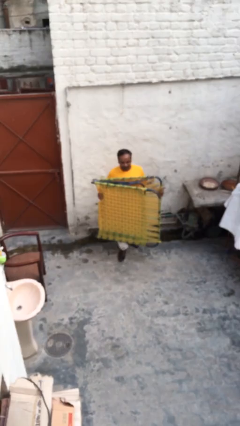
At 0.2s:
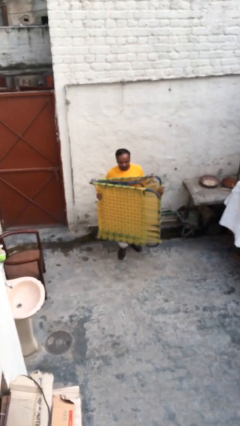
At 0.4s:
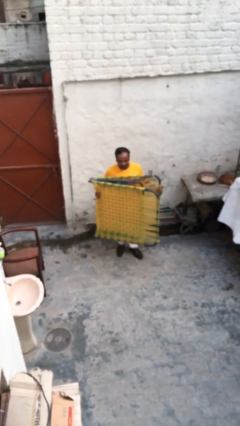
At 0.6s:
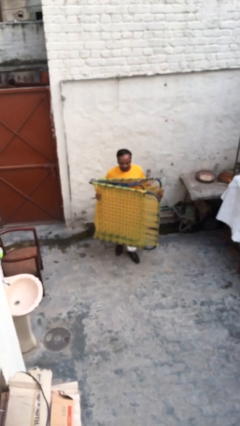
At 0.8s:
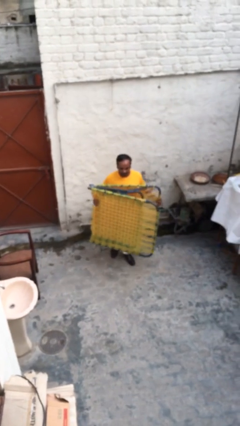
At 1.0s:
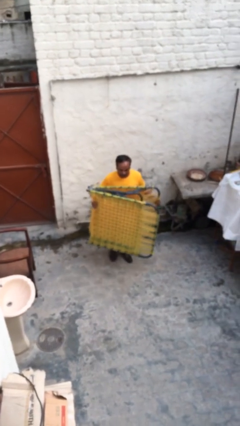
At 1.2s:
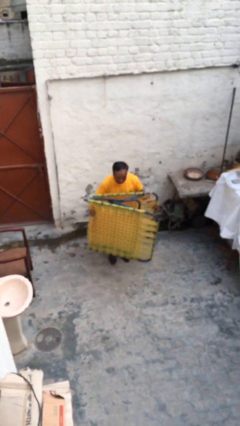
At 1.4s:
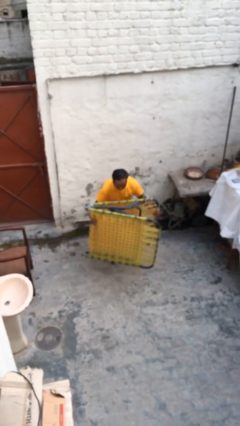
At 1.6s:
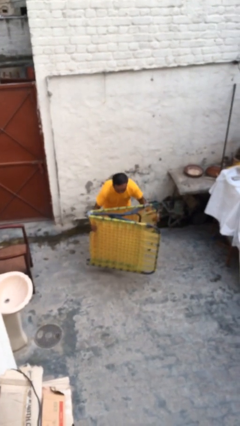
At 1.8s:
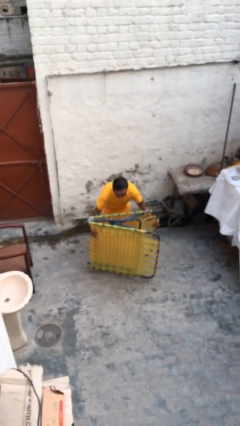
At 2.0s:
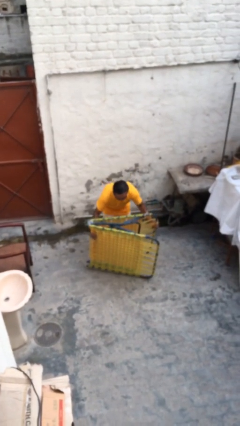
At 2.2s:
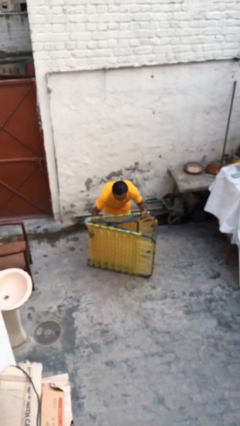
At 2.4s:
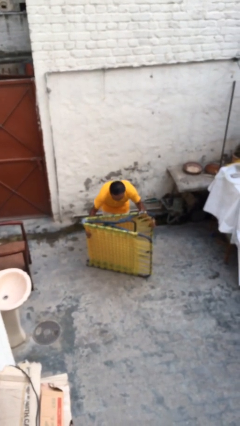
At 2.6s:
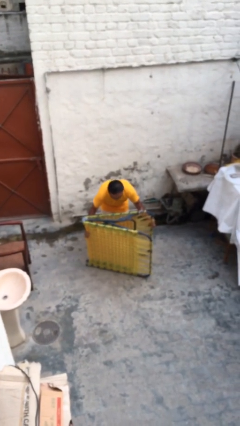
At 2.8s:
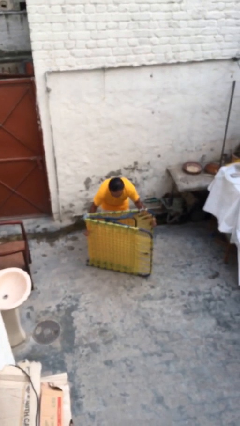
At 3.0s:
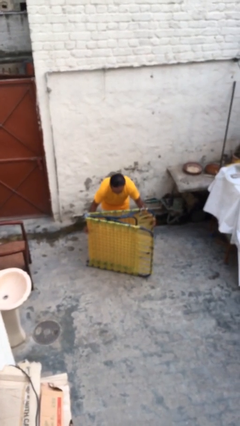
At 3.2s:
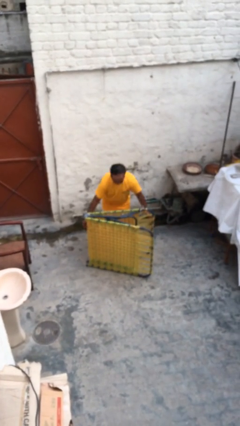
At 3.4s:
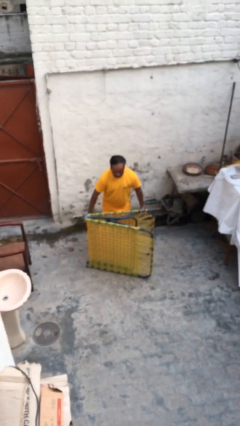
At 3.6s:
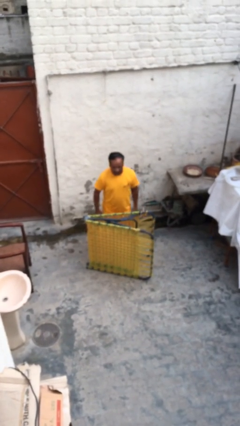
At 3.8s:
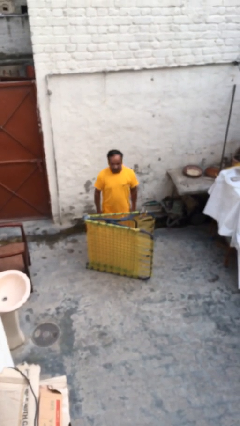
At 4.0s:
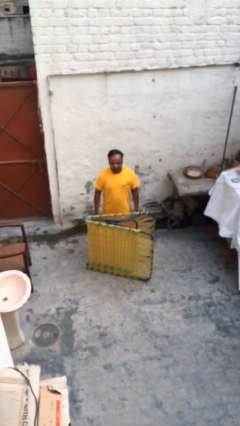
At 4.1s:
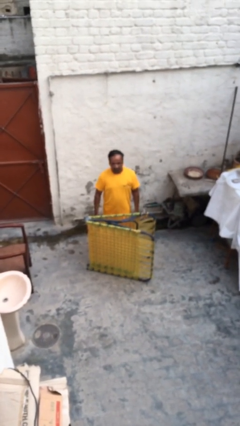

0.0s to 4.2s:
person puts down object on floor

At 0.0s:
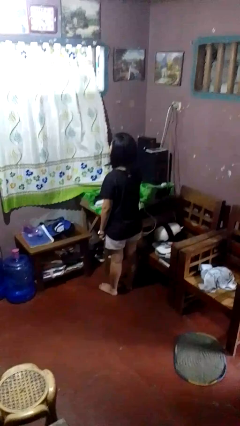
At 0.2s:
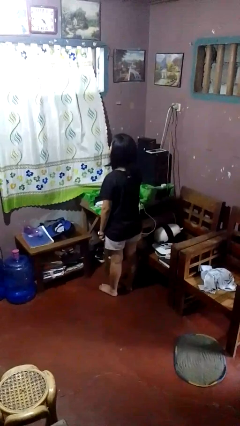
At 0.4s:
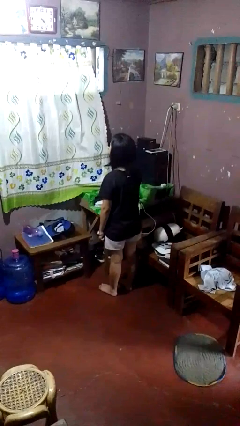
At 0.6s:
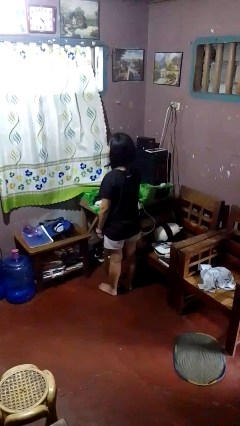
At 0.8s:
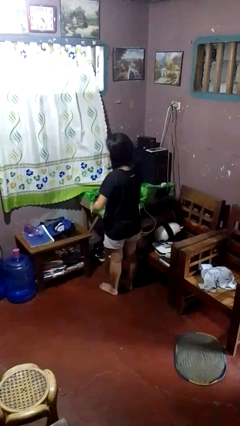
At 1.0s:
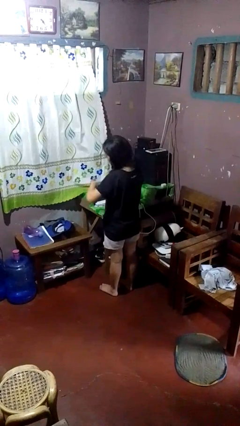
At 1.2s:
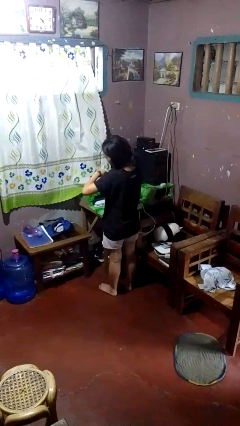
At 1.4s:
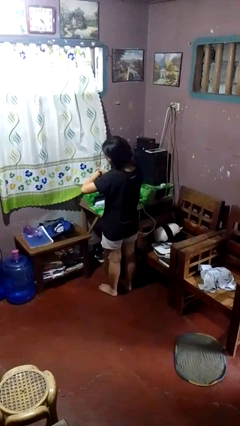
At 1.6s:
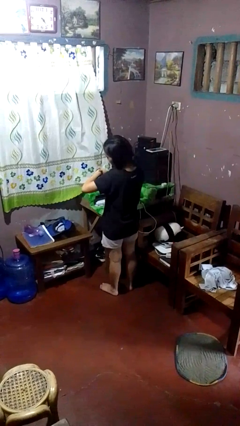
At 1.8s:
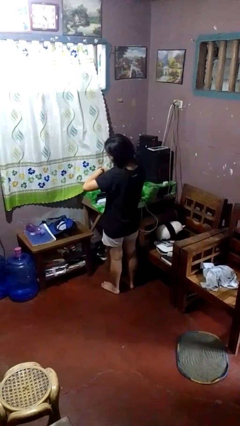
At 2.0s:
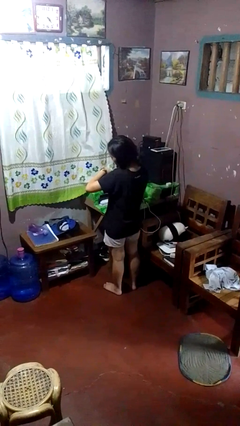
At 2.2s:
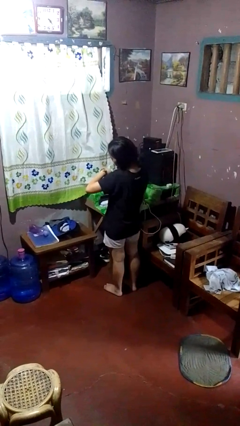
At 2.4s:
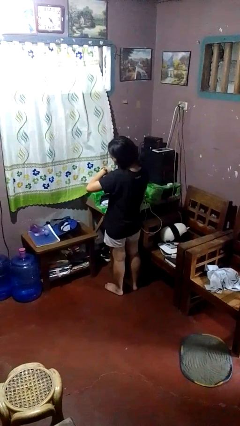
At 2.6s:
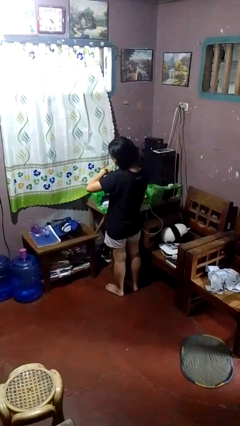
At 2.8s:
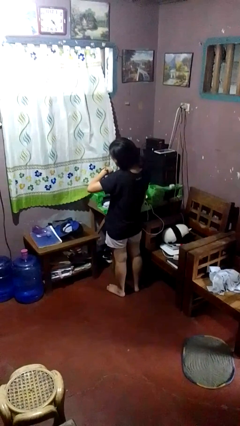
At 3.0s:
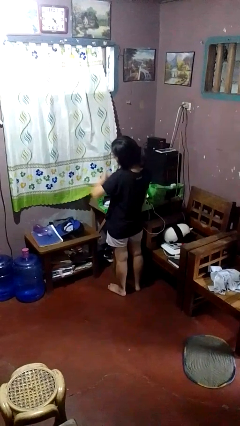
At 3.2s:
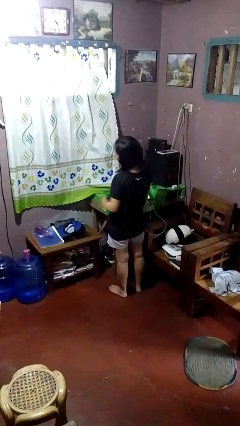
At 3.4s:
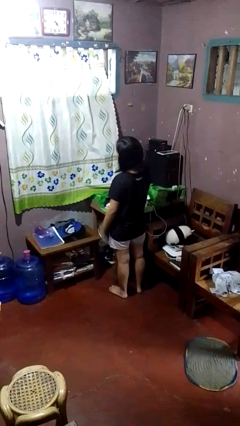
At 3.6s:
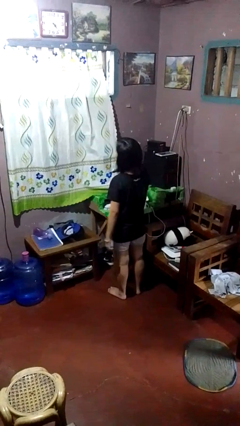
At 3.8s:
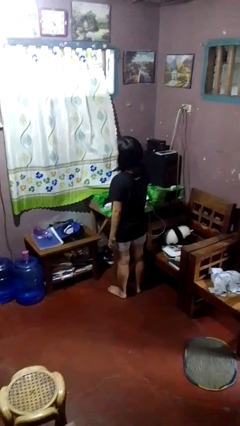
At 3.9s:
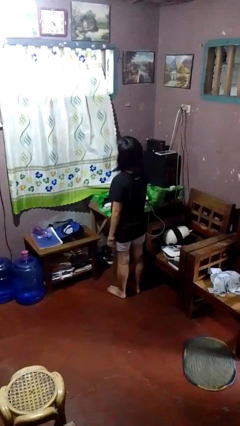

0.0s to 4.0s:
person looks at wristwatch

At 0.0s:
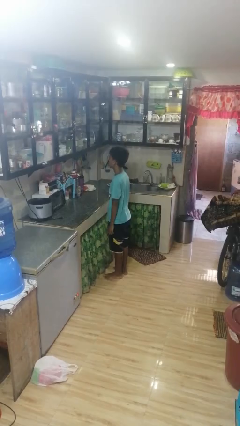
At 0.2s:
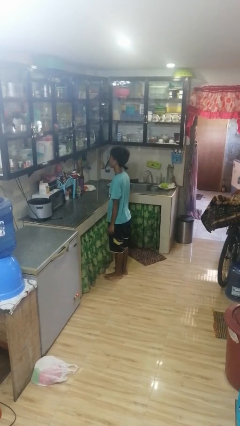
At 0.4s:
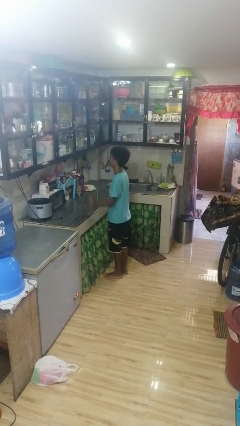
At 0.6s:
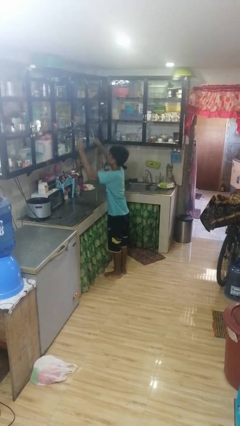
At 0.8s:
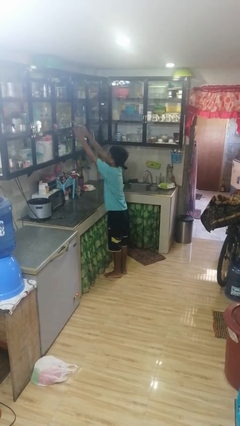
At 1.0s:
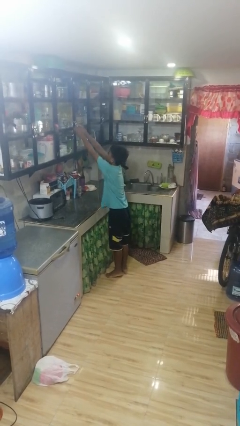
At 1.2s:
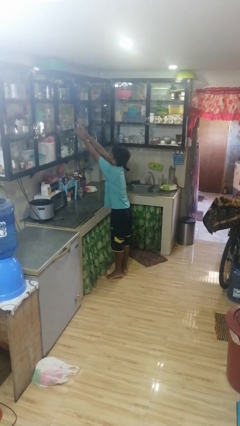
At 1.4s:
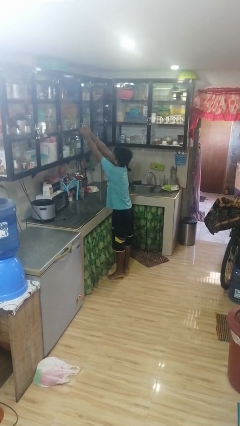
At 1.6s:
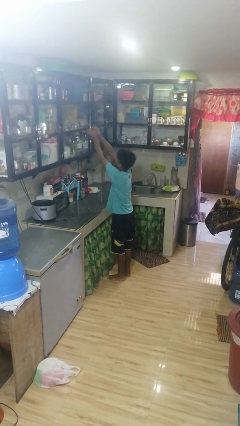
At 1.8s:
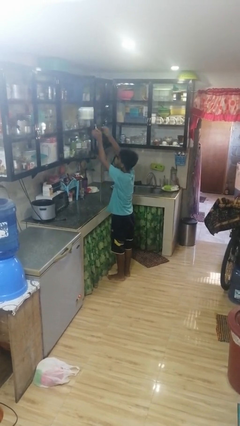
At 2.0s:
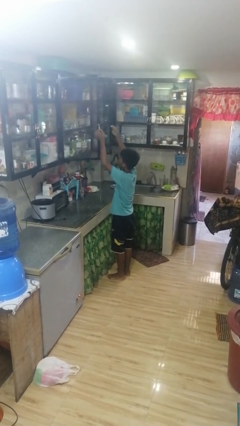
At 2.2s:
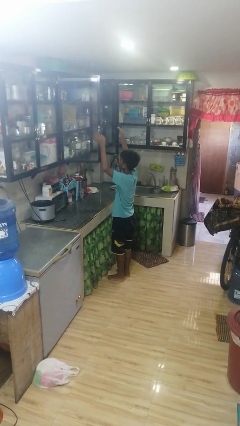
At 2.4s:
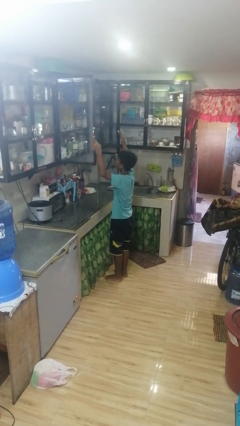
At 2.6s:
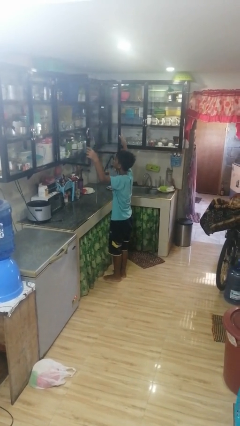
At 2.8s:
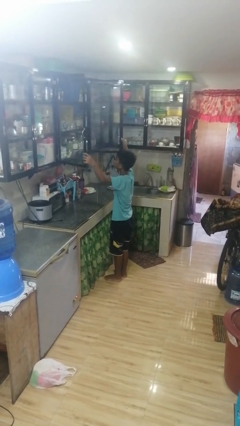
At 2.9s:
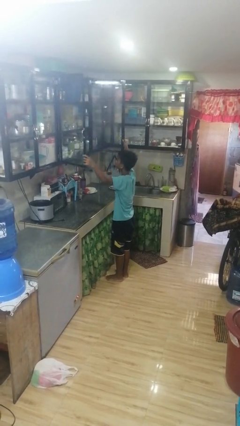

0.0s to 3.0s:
person opens cabinet

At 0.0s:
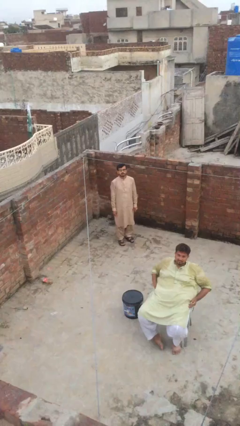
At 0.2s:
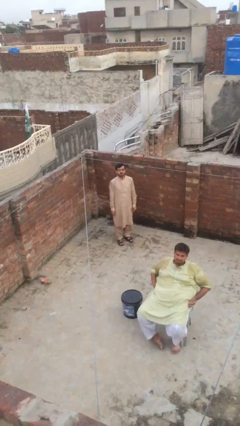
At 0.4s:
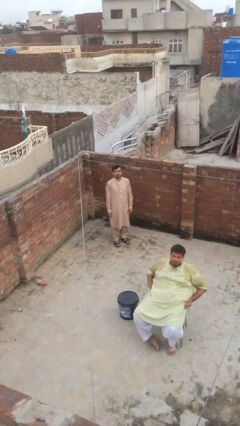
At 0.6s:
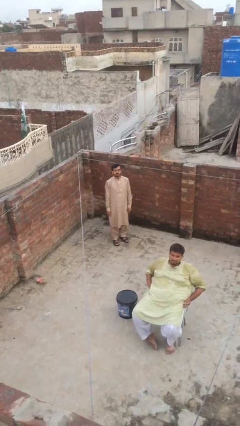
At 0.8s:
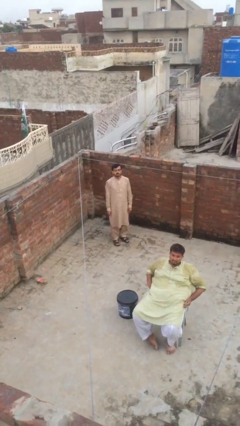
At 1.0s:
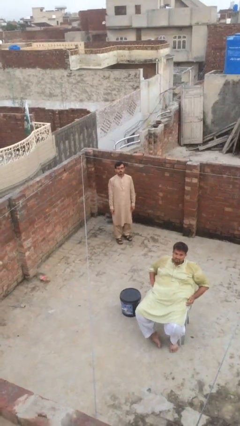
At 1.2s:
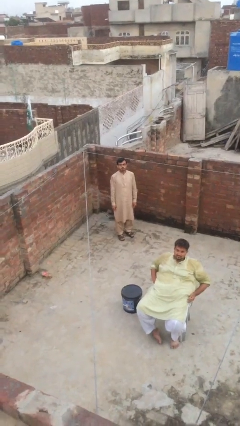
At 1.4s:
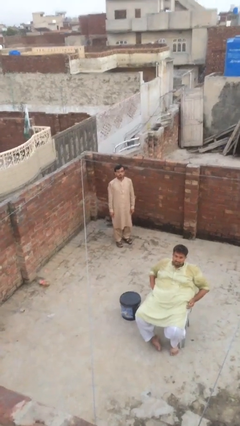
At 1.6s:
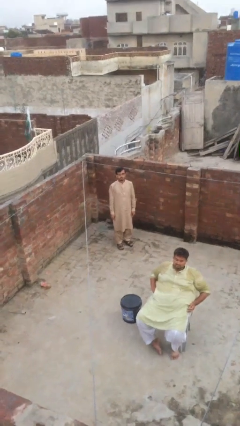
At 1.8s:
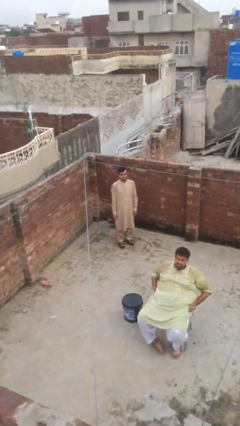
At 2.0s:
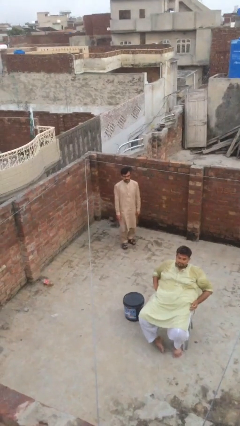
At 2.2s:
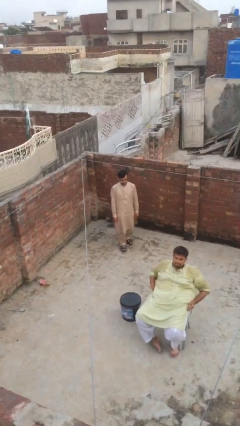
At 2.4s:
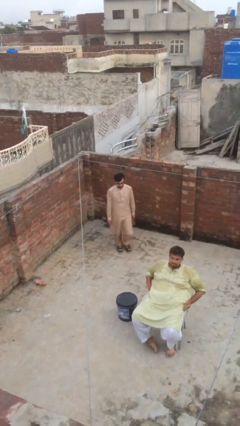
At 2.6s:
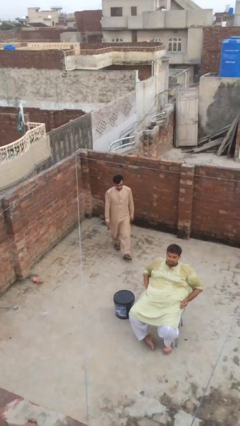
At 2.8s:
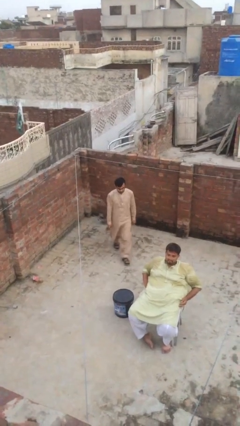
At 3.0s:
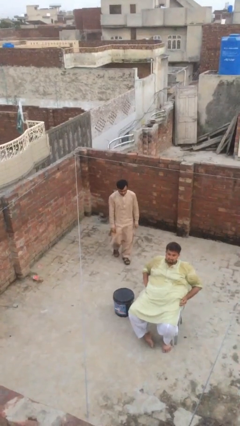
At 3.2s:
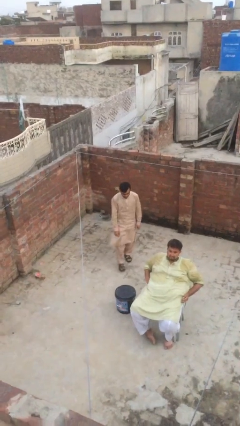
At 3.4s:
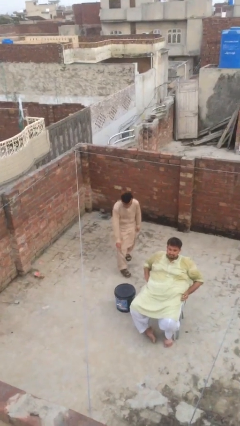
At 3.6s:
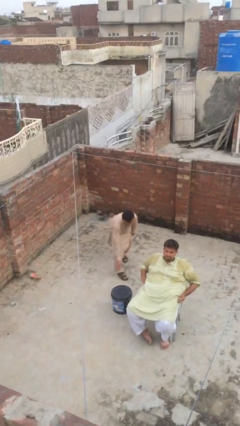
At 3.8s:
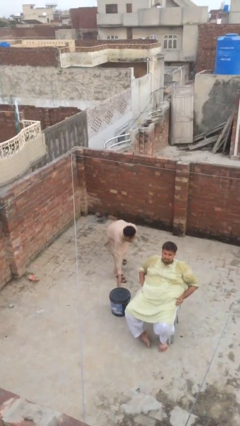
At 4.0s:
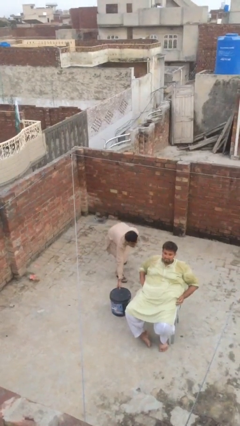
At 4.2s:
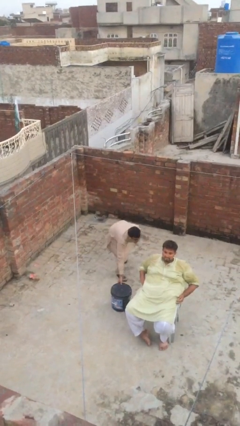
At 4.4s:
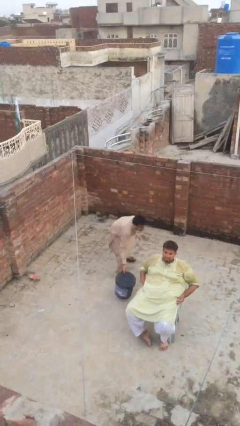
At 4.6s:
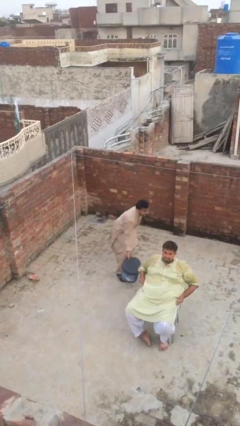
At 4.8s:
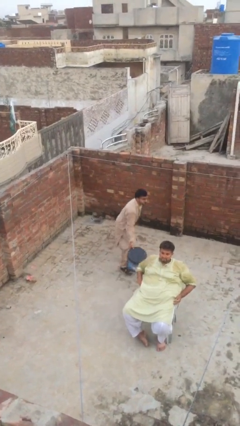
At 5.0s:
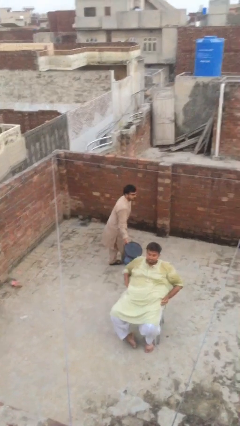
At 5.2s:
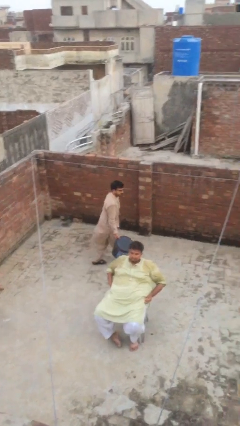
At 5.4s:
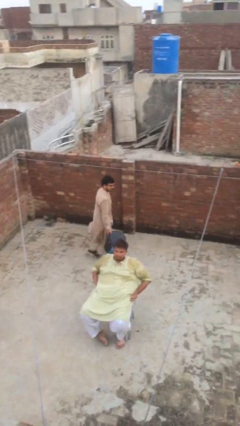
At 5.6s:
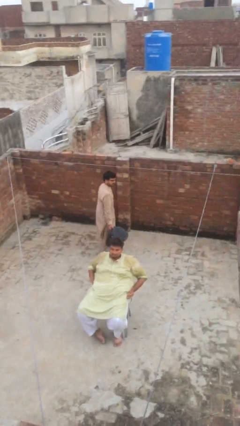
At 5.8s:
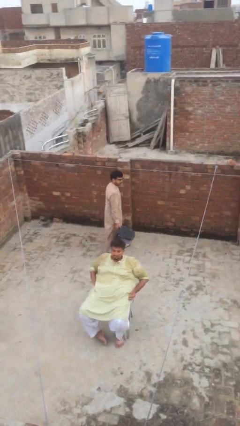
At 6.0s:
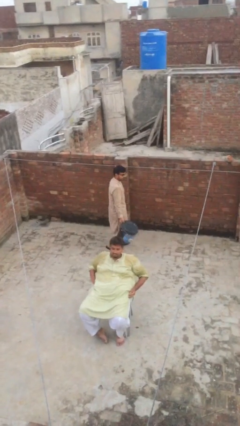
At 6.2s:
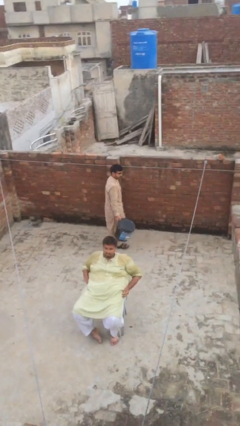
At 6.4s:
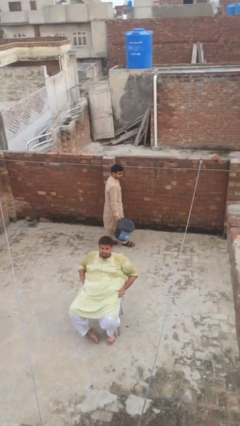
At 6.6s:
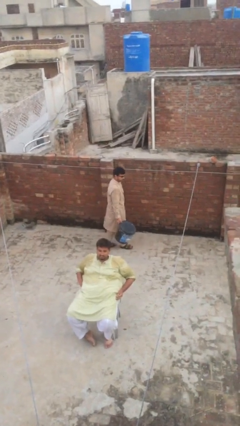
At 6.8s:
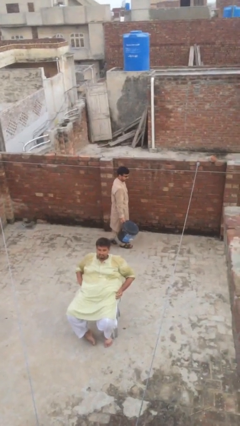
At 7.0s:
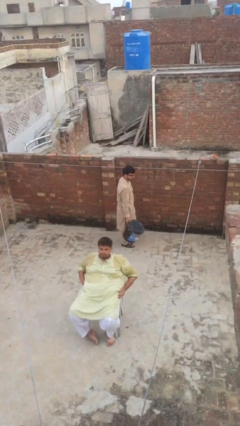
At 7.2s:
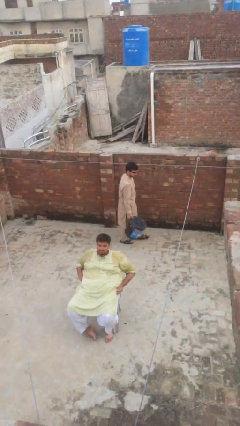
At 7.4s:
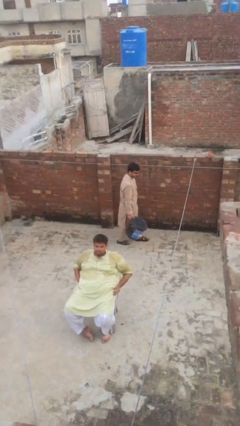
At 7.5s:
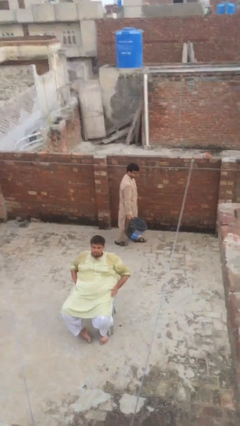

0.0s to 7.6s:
person steals object from person
